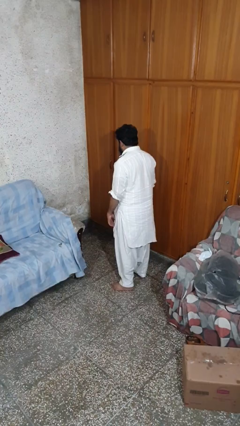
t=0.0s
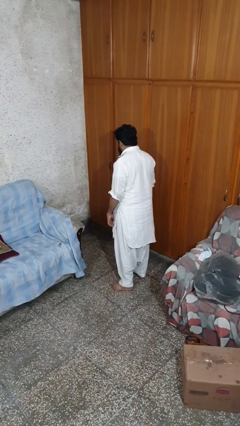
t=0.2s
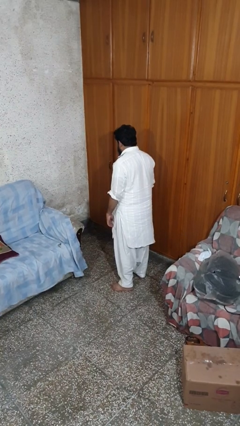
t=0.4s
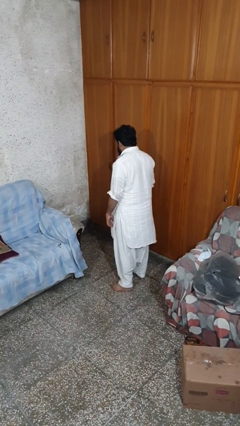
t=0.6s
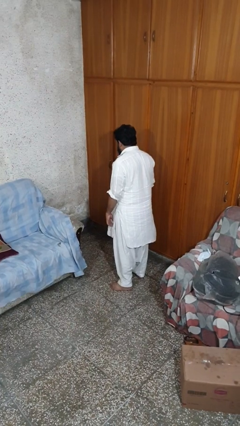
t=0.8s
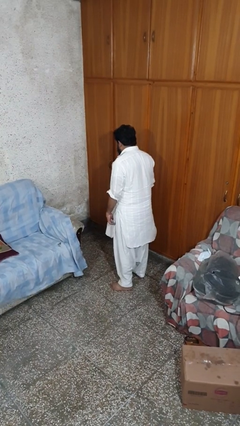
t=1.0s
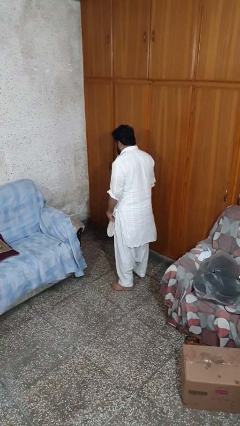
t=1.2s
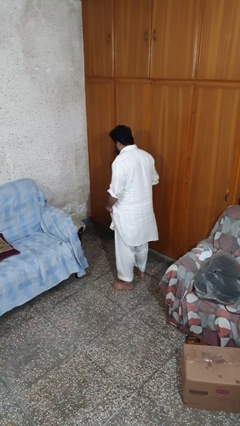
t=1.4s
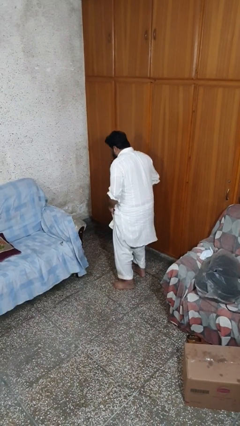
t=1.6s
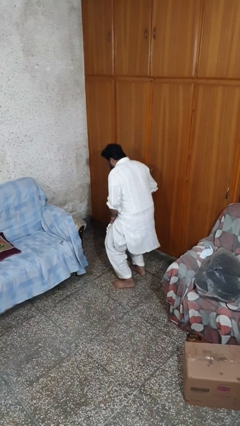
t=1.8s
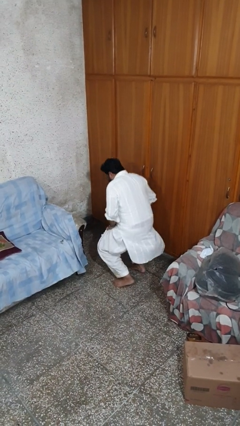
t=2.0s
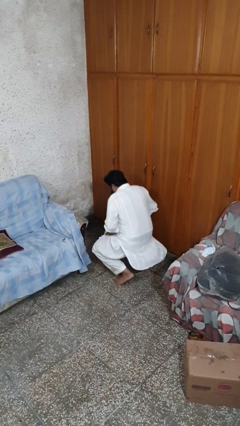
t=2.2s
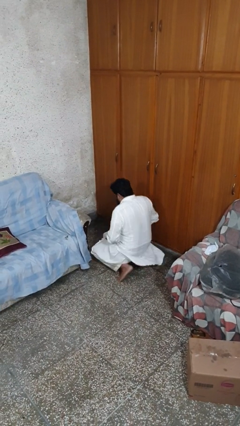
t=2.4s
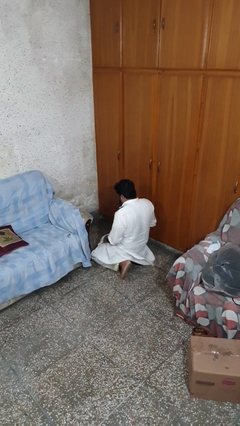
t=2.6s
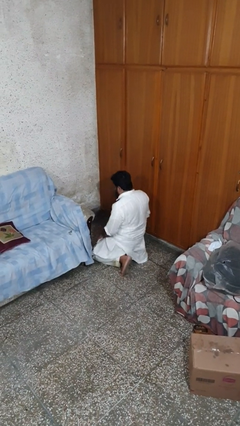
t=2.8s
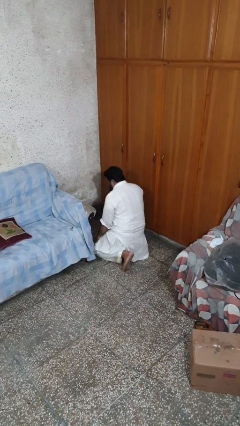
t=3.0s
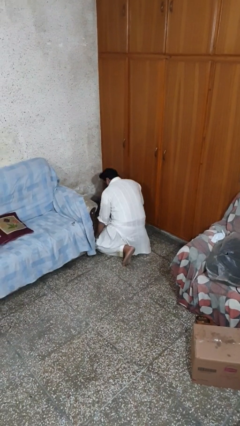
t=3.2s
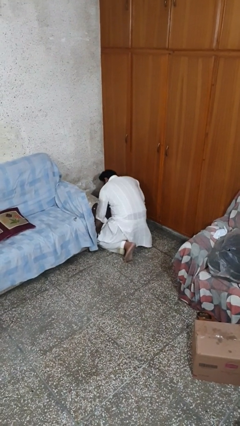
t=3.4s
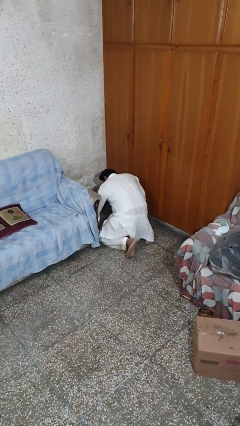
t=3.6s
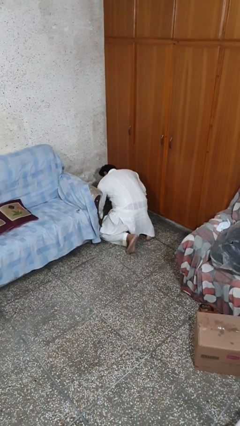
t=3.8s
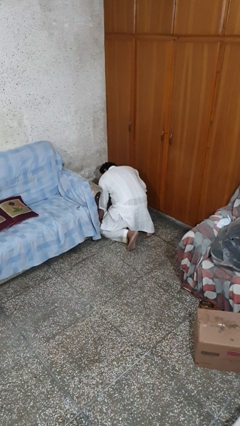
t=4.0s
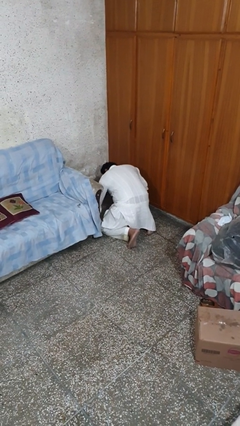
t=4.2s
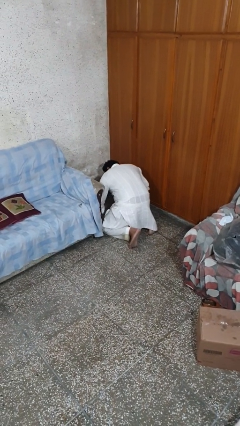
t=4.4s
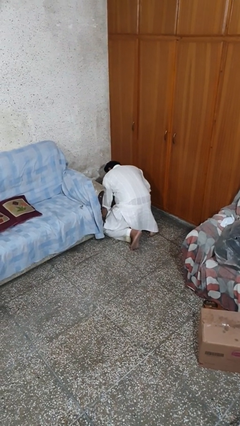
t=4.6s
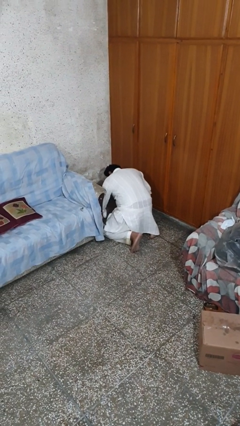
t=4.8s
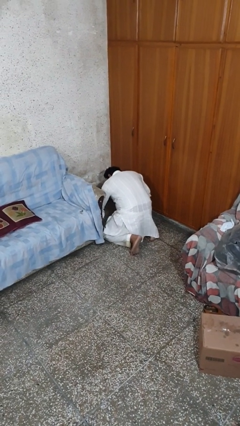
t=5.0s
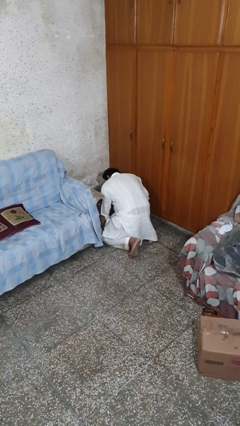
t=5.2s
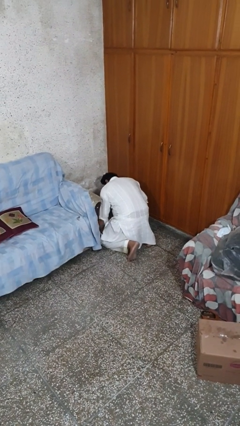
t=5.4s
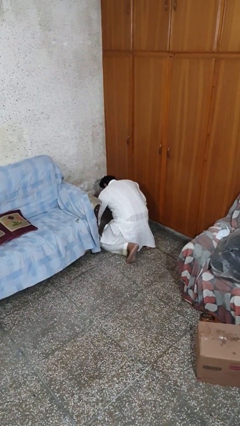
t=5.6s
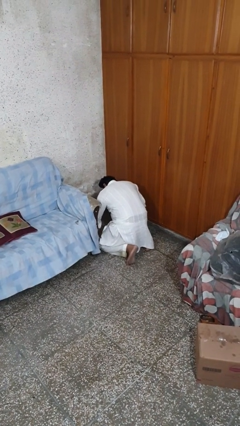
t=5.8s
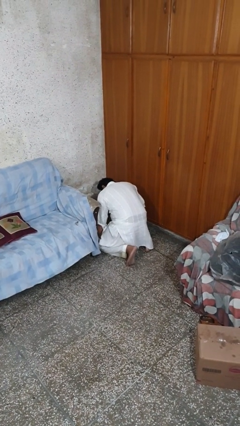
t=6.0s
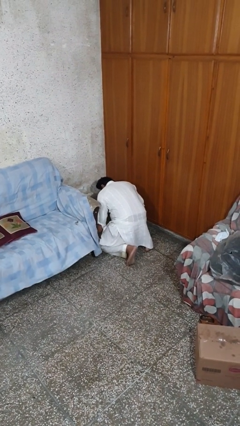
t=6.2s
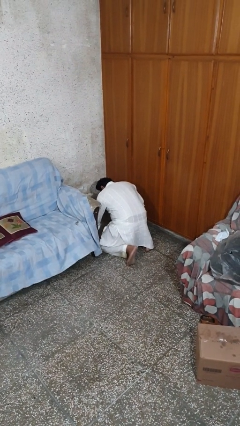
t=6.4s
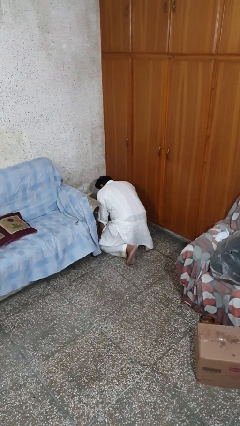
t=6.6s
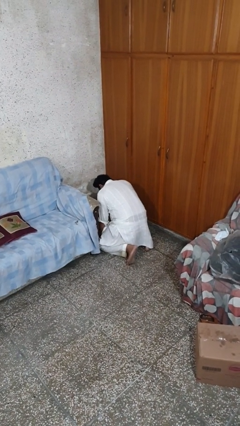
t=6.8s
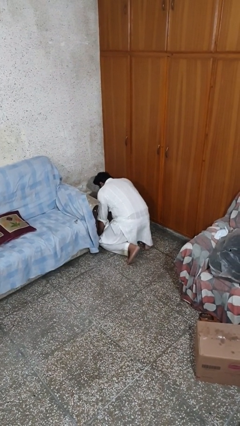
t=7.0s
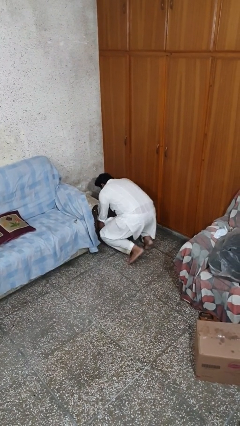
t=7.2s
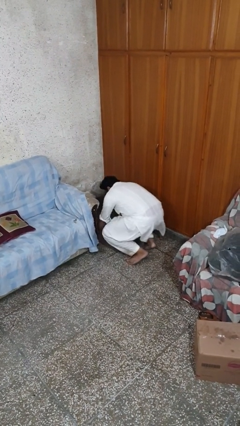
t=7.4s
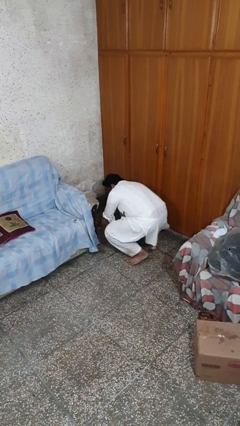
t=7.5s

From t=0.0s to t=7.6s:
person searches under couch

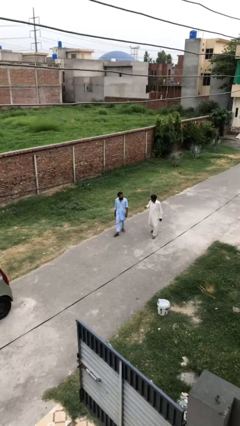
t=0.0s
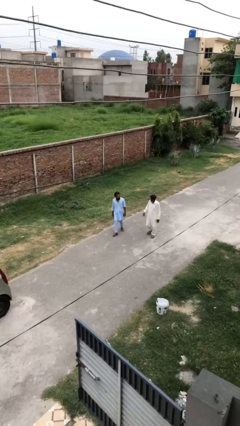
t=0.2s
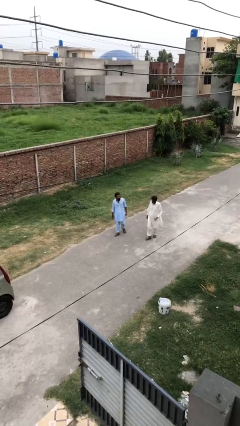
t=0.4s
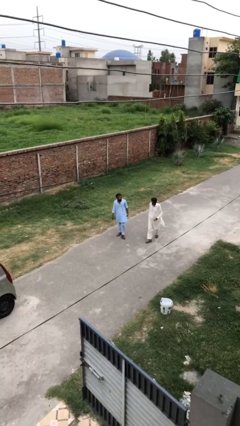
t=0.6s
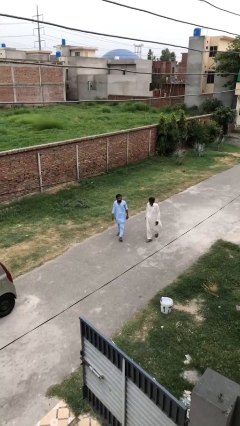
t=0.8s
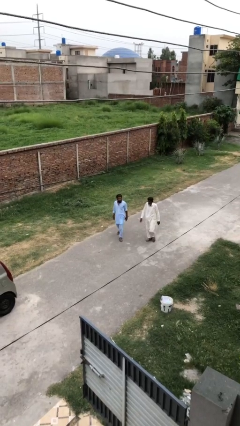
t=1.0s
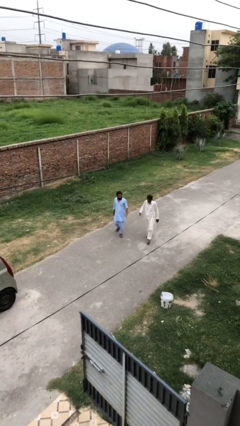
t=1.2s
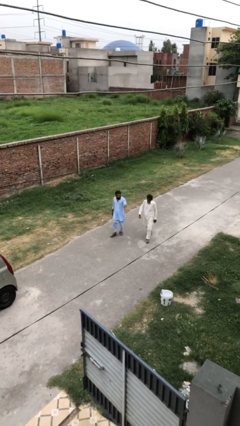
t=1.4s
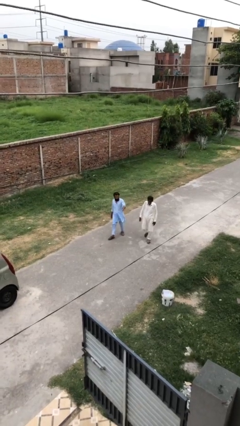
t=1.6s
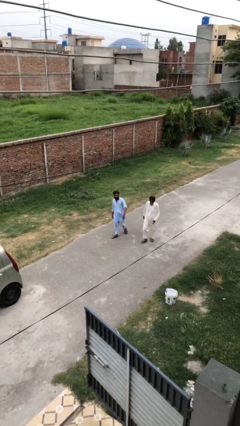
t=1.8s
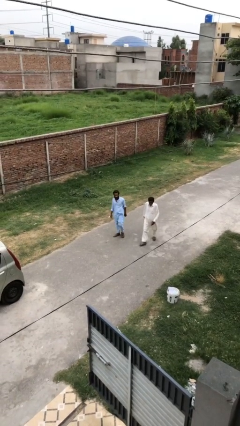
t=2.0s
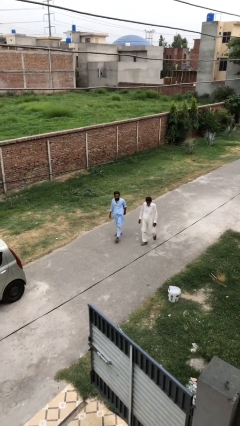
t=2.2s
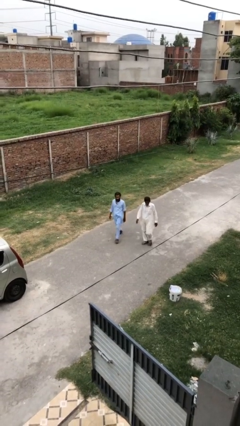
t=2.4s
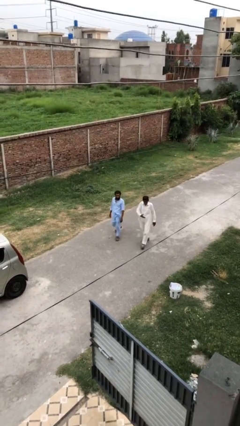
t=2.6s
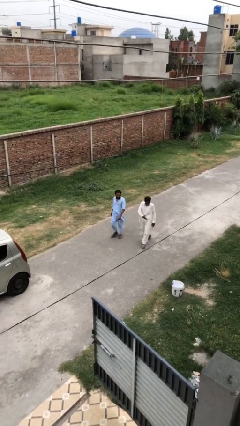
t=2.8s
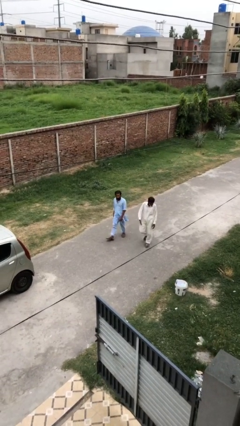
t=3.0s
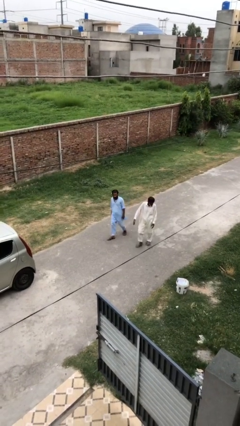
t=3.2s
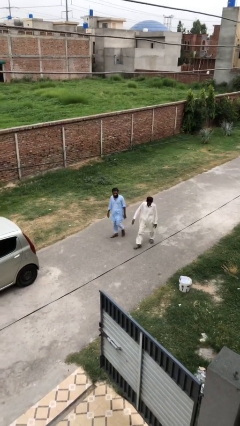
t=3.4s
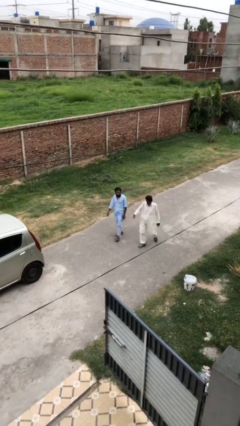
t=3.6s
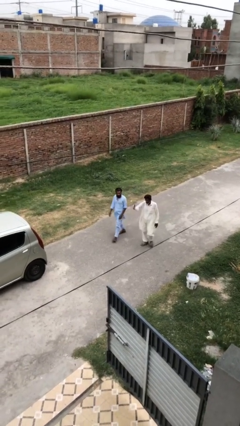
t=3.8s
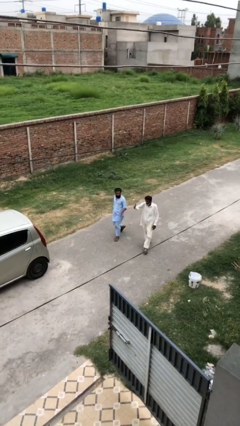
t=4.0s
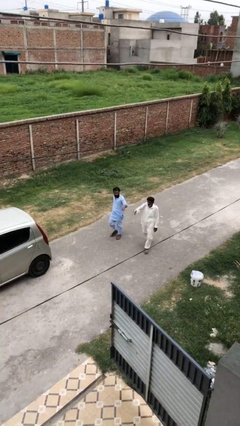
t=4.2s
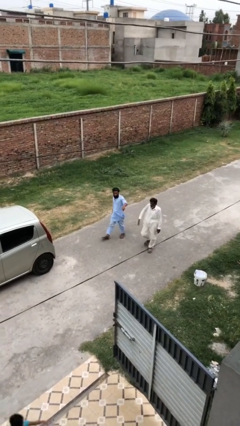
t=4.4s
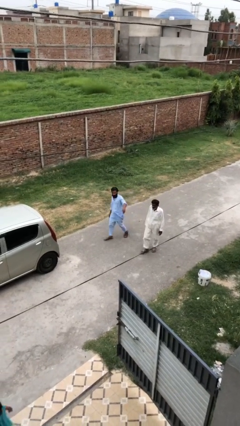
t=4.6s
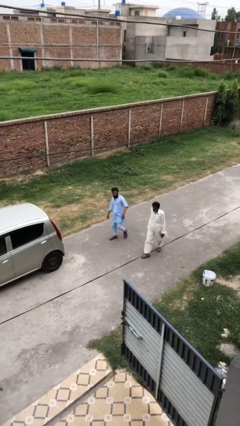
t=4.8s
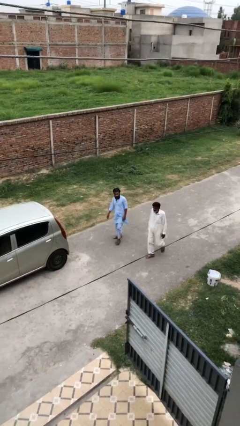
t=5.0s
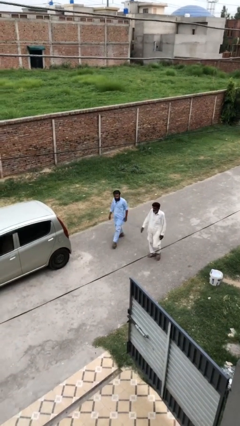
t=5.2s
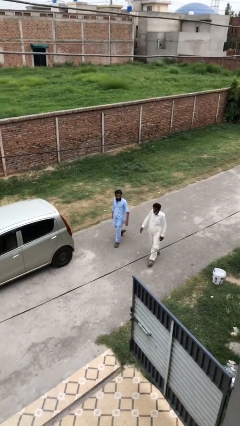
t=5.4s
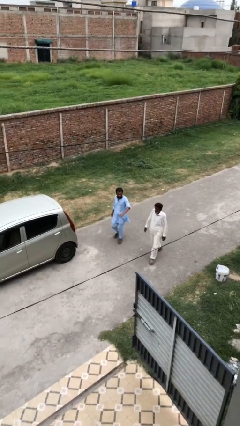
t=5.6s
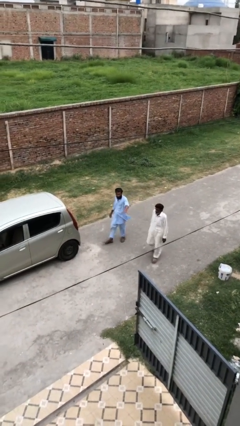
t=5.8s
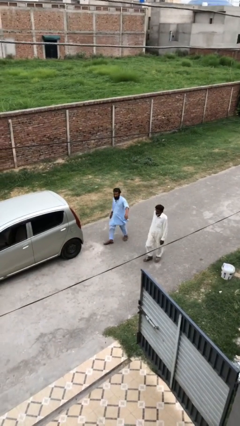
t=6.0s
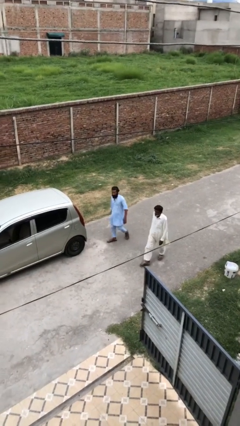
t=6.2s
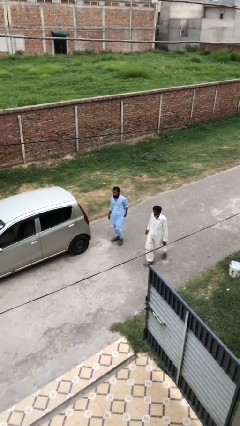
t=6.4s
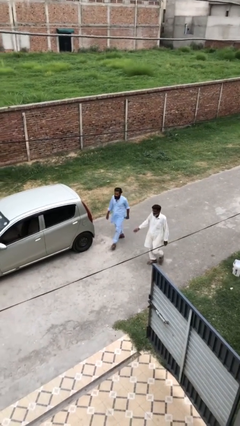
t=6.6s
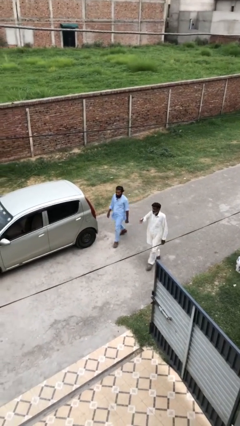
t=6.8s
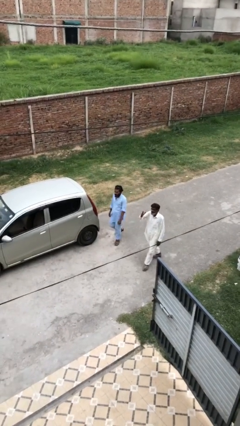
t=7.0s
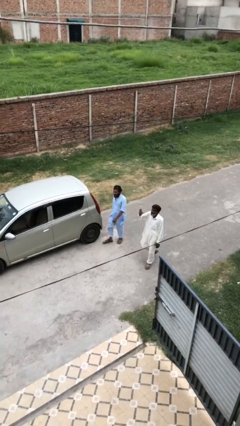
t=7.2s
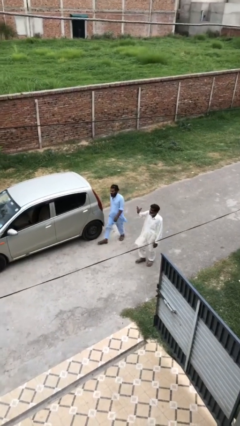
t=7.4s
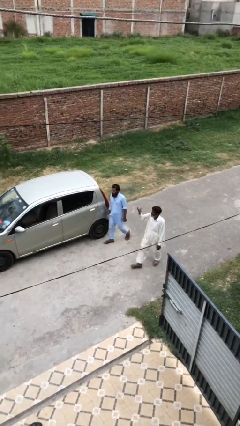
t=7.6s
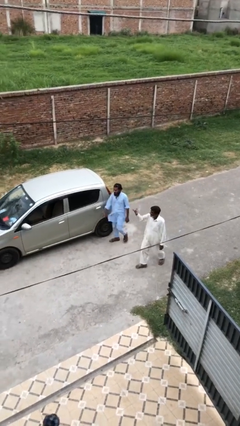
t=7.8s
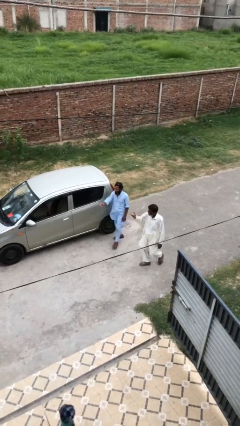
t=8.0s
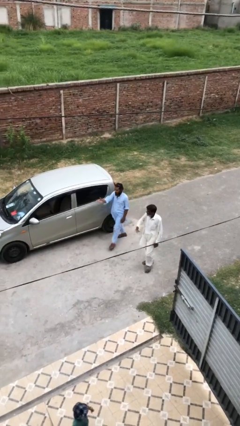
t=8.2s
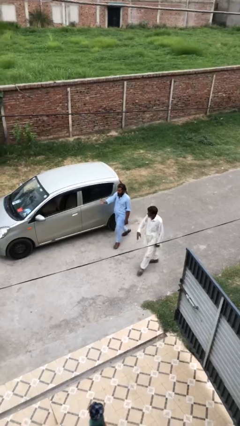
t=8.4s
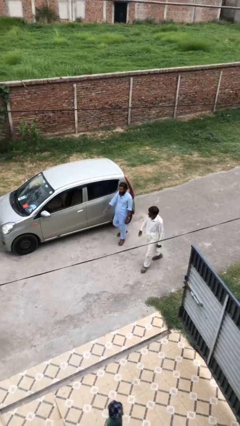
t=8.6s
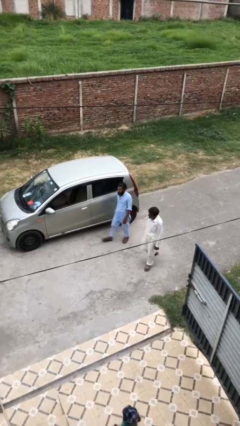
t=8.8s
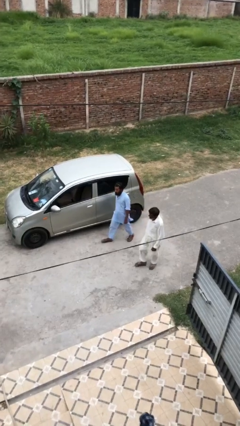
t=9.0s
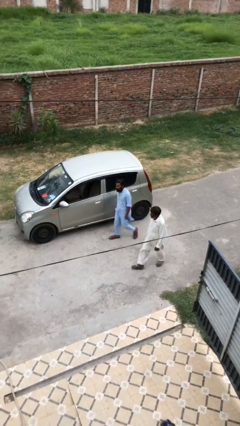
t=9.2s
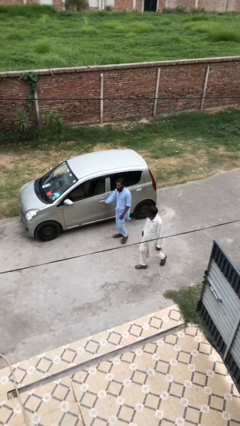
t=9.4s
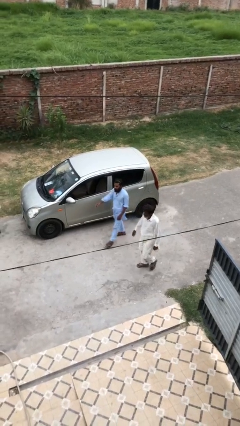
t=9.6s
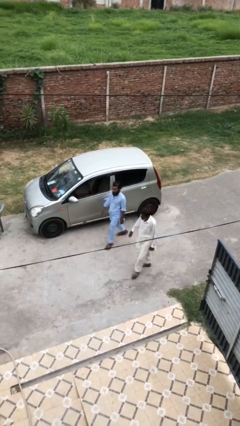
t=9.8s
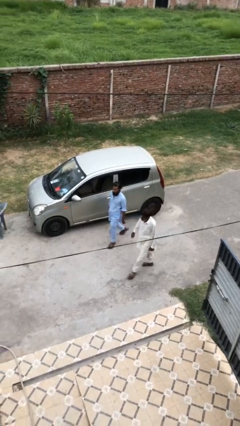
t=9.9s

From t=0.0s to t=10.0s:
person talks to person

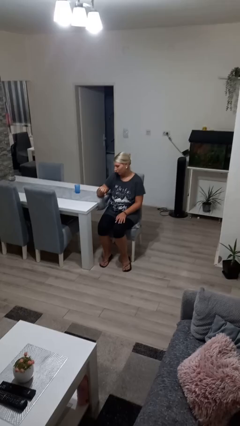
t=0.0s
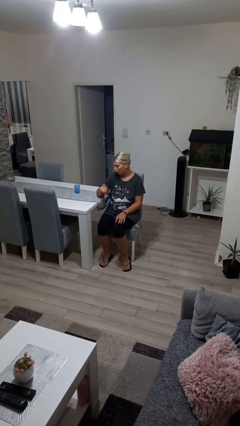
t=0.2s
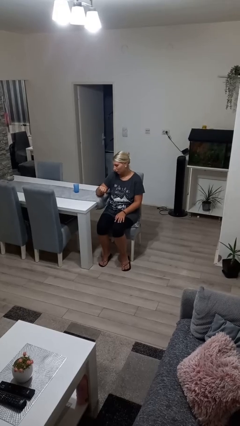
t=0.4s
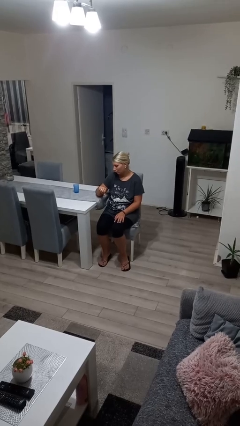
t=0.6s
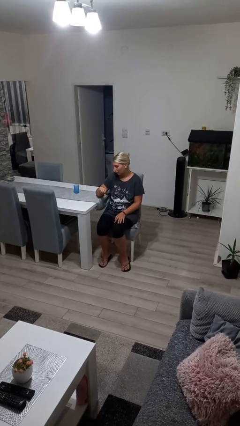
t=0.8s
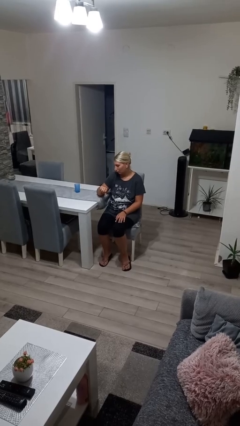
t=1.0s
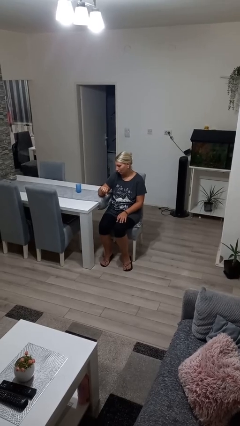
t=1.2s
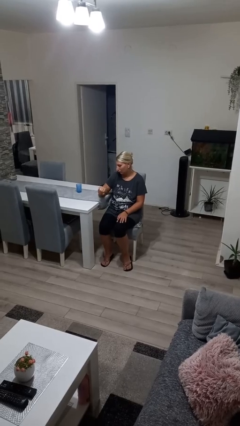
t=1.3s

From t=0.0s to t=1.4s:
person looks at wristwatch
